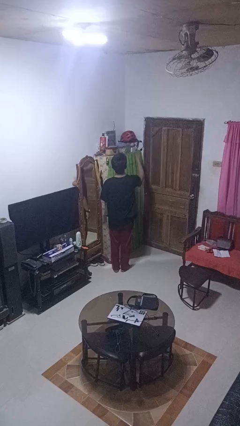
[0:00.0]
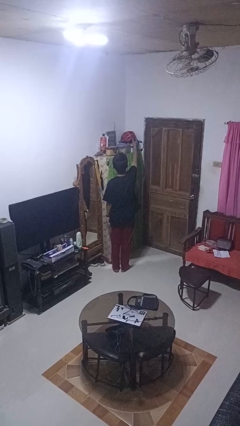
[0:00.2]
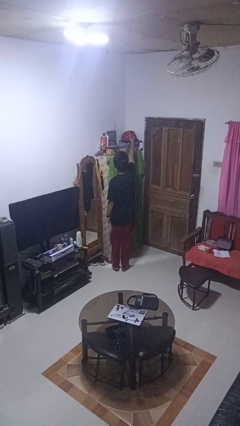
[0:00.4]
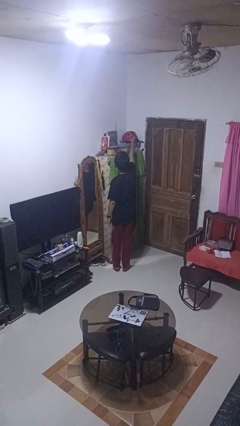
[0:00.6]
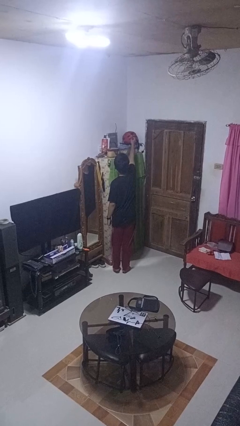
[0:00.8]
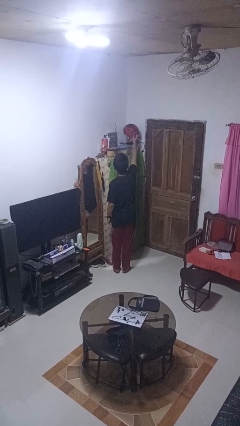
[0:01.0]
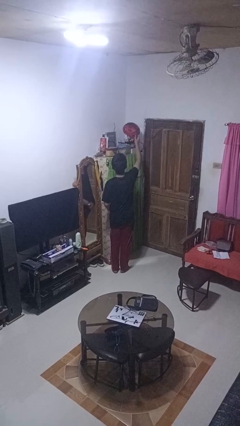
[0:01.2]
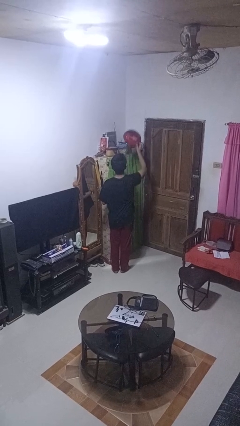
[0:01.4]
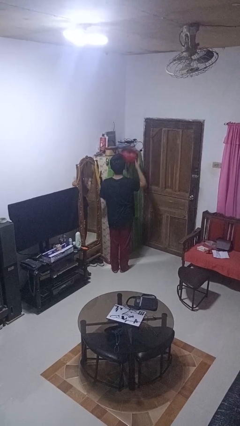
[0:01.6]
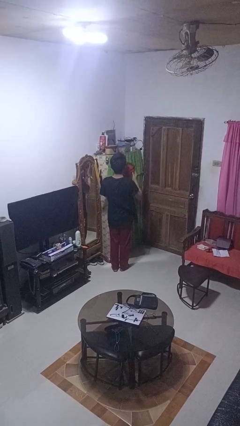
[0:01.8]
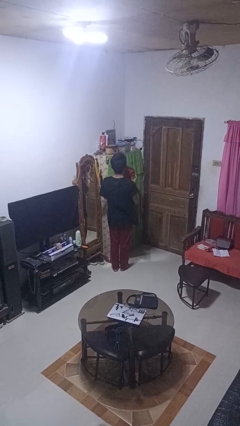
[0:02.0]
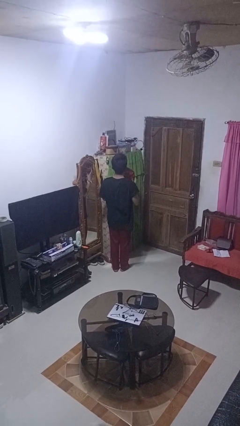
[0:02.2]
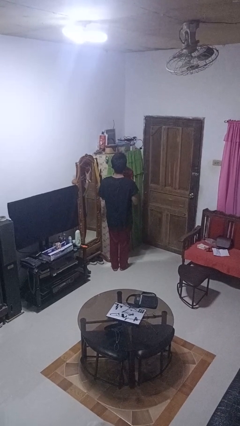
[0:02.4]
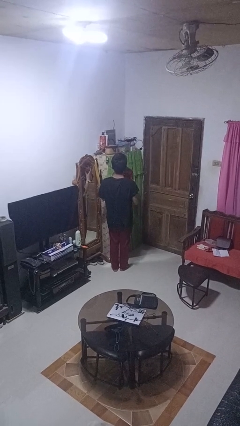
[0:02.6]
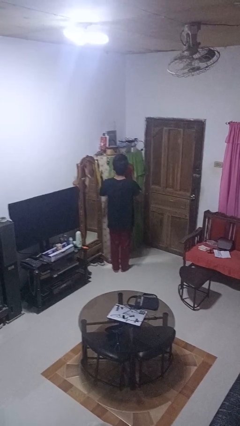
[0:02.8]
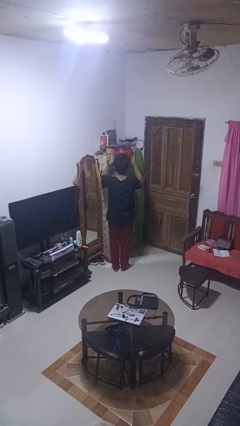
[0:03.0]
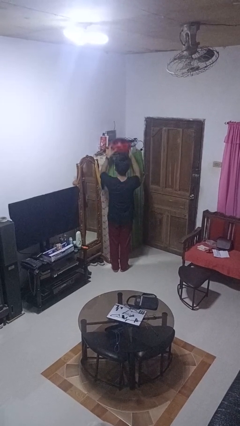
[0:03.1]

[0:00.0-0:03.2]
person picks up object from shelf

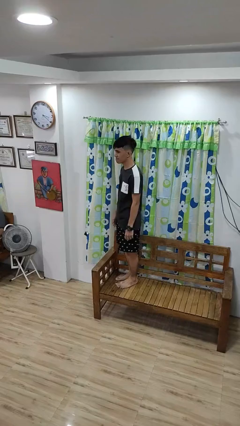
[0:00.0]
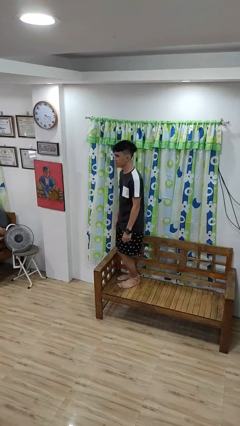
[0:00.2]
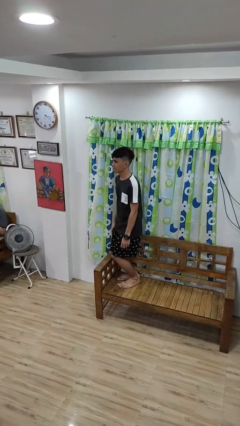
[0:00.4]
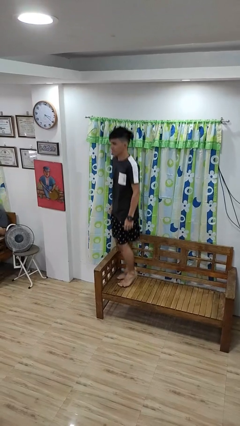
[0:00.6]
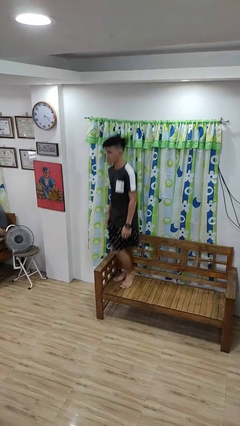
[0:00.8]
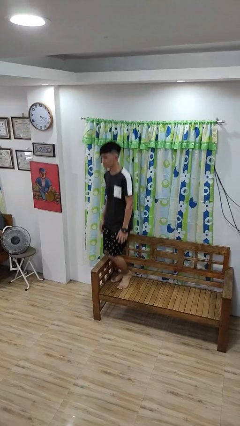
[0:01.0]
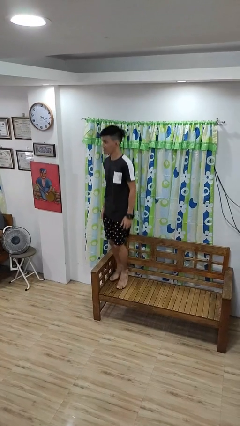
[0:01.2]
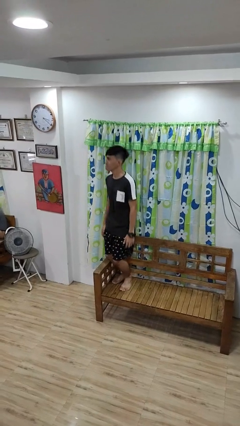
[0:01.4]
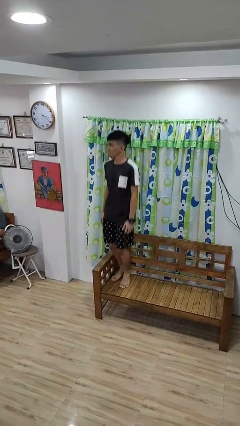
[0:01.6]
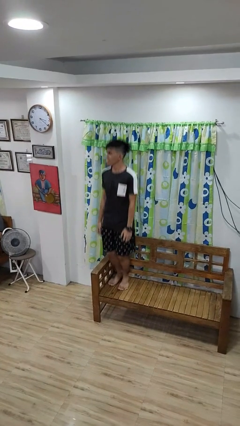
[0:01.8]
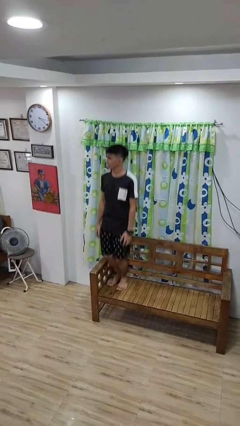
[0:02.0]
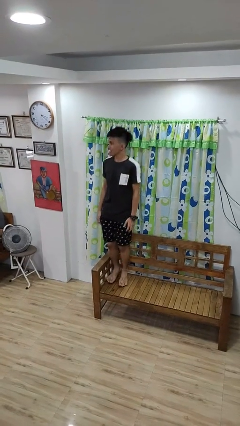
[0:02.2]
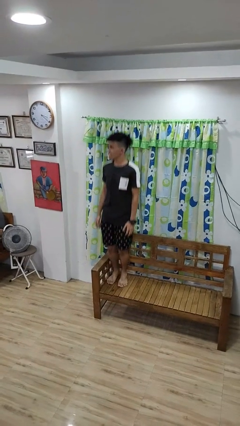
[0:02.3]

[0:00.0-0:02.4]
person jumps on couch

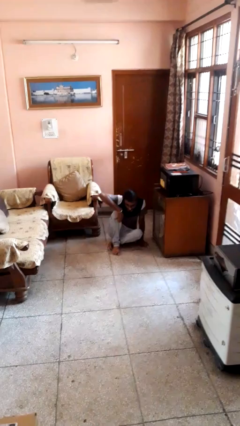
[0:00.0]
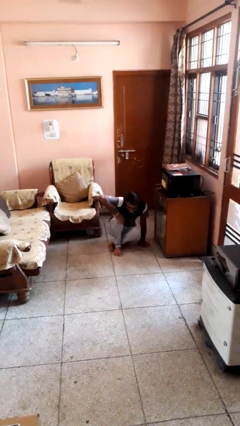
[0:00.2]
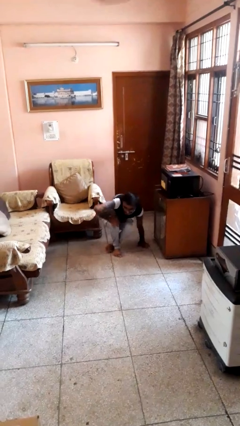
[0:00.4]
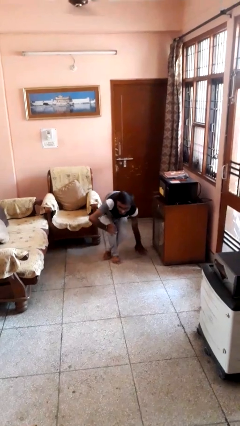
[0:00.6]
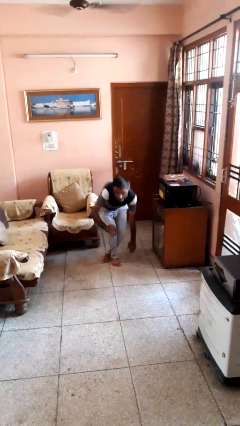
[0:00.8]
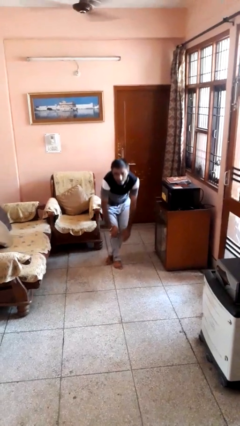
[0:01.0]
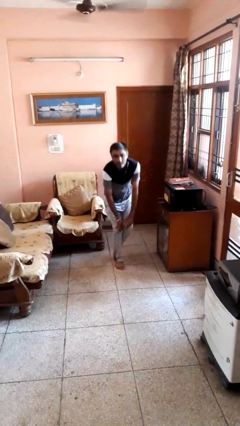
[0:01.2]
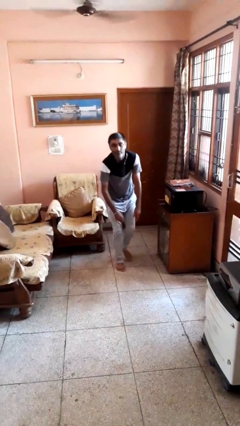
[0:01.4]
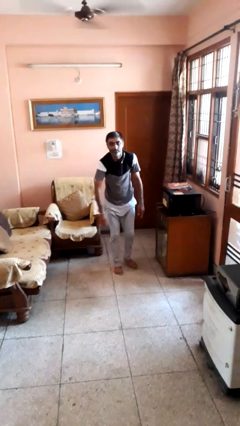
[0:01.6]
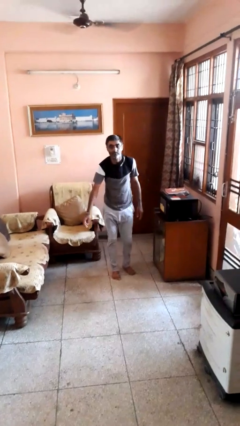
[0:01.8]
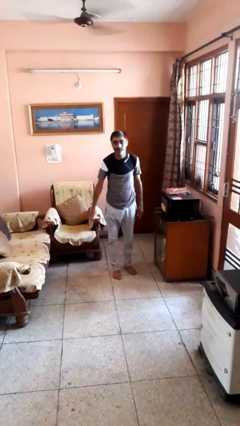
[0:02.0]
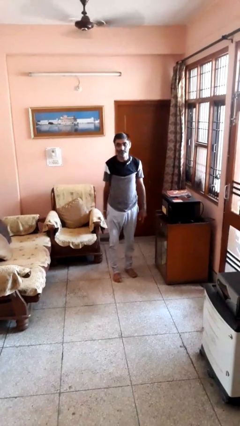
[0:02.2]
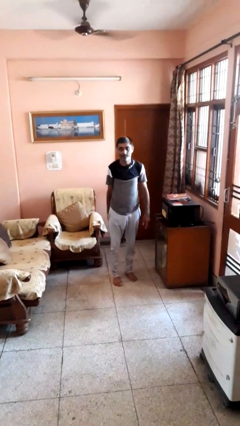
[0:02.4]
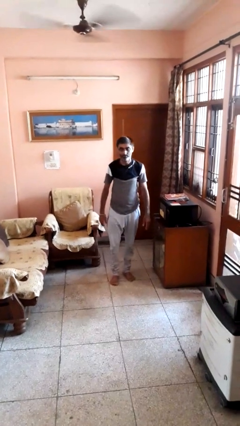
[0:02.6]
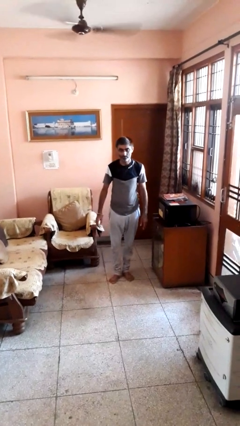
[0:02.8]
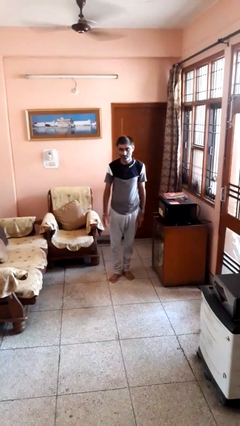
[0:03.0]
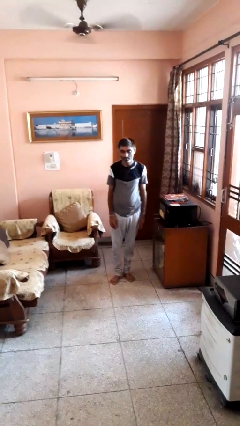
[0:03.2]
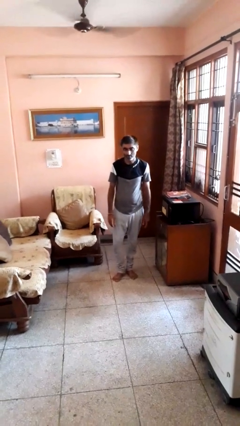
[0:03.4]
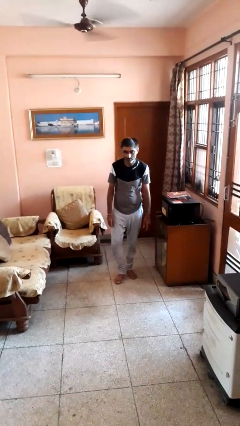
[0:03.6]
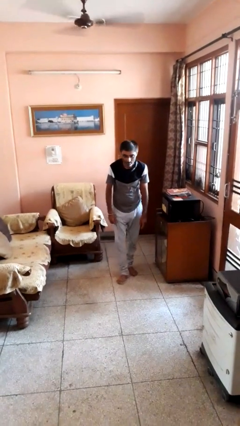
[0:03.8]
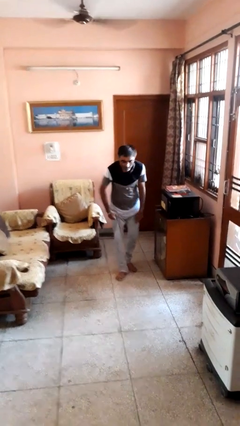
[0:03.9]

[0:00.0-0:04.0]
person stands up from floor

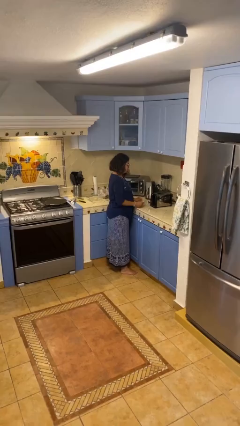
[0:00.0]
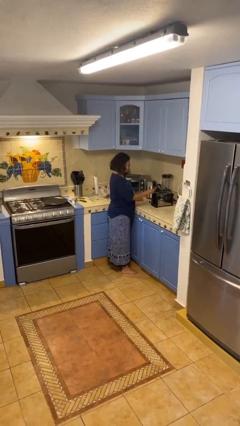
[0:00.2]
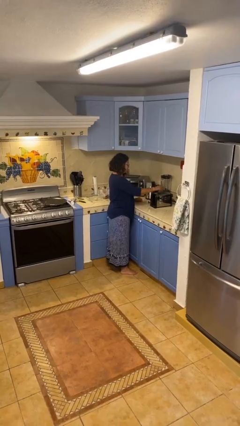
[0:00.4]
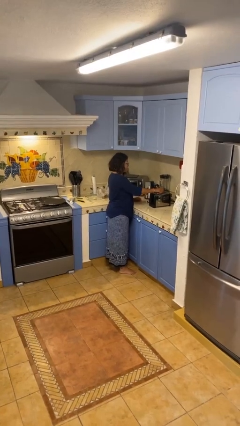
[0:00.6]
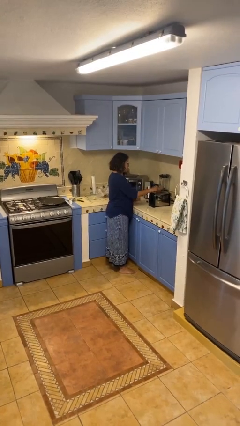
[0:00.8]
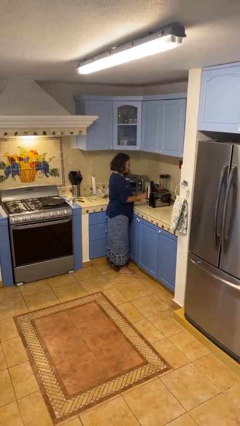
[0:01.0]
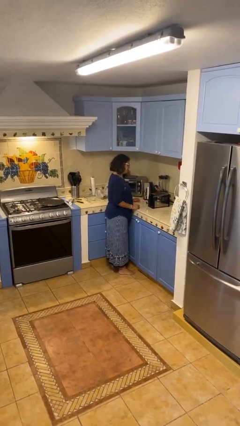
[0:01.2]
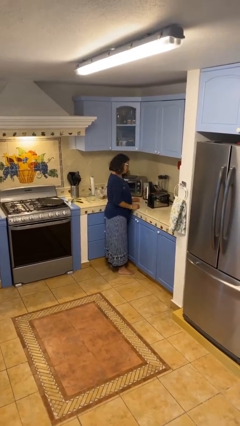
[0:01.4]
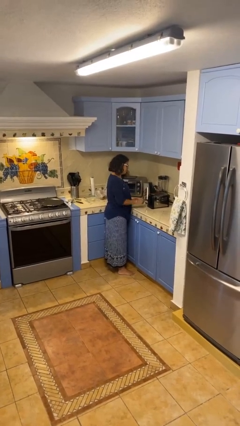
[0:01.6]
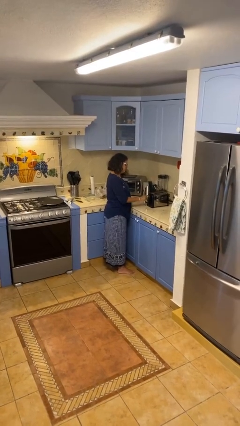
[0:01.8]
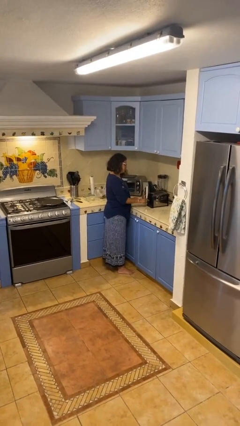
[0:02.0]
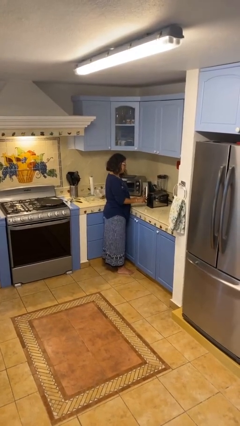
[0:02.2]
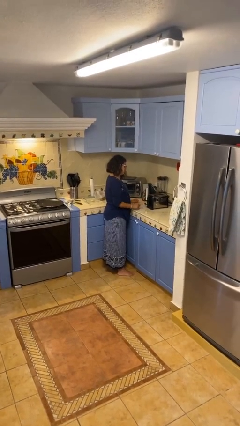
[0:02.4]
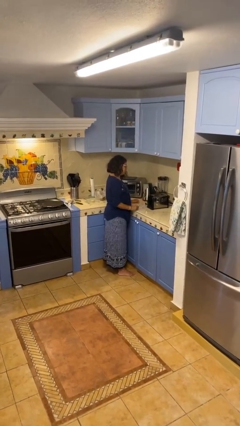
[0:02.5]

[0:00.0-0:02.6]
person puts object into toaster

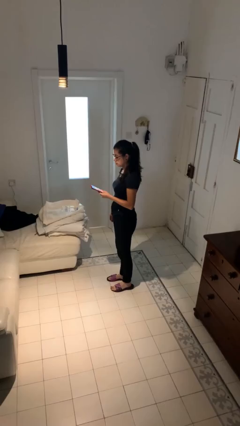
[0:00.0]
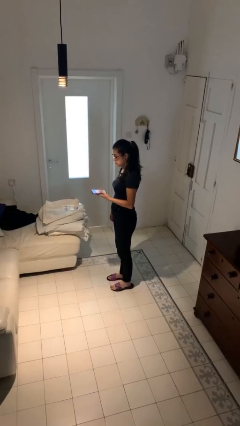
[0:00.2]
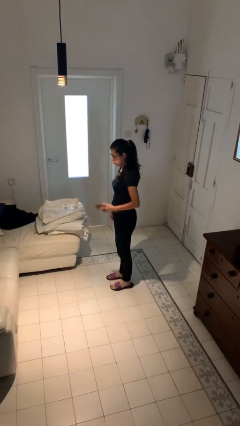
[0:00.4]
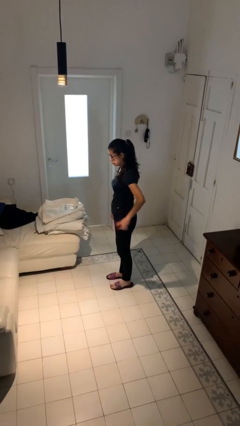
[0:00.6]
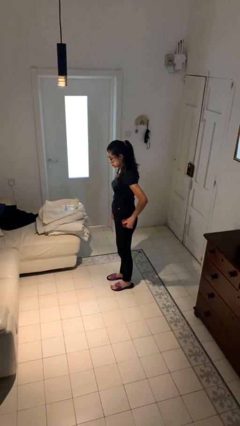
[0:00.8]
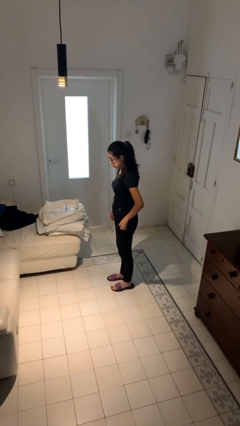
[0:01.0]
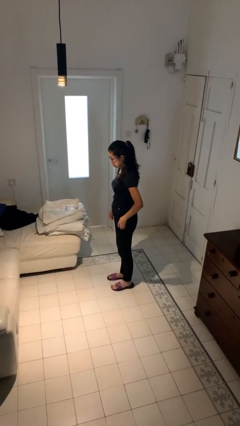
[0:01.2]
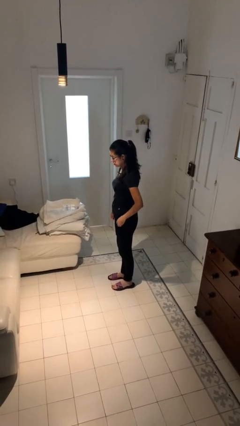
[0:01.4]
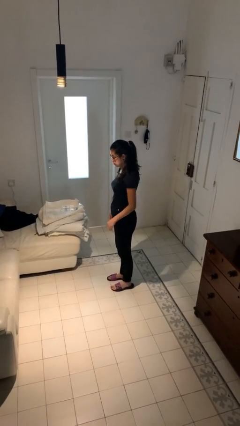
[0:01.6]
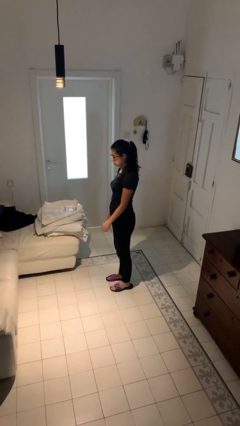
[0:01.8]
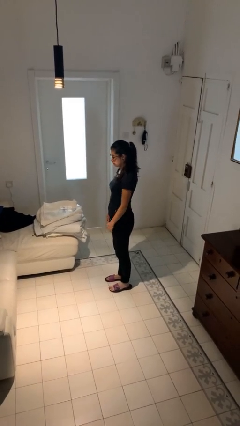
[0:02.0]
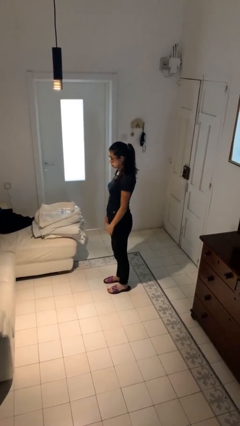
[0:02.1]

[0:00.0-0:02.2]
person puts phone into pocket

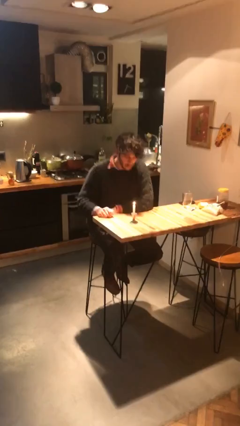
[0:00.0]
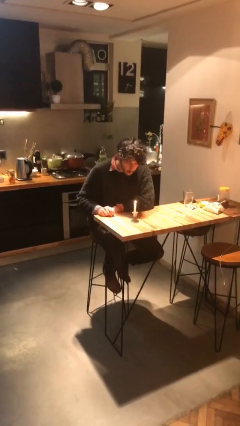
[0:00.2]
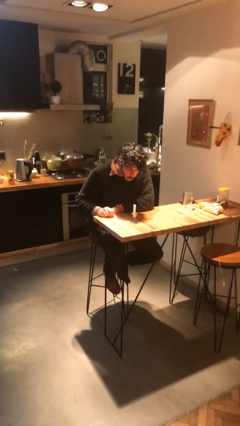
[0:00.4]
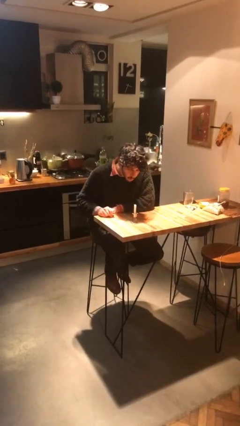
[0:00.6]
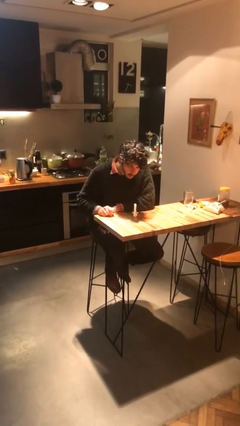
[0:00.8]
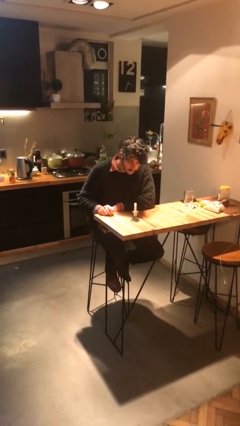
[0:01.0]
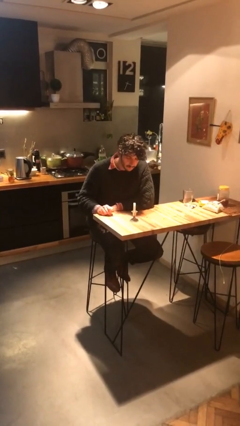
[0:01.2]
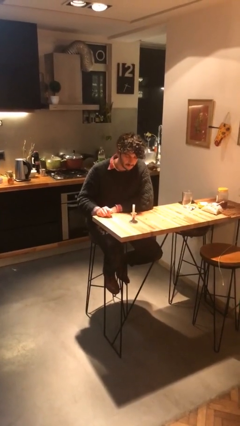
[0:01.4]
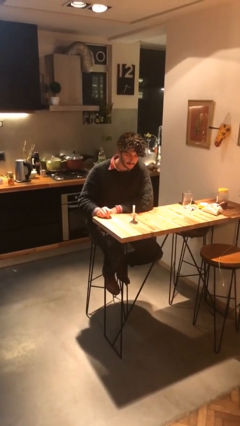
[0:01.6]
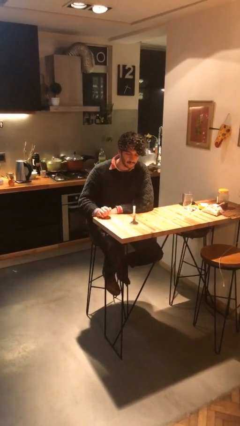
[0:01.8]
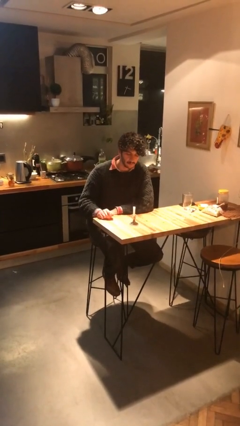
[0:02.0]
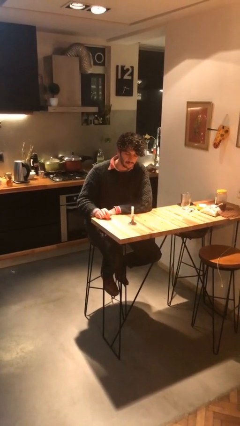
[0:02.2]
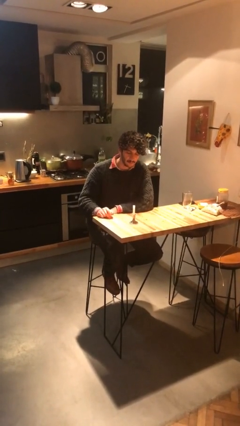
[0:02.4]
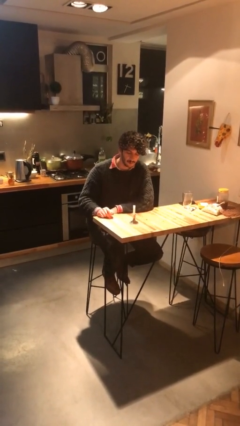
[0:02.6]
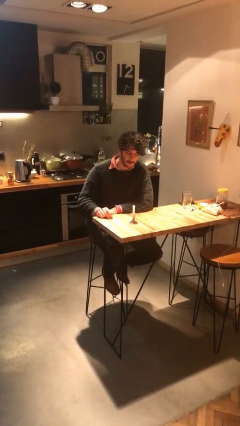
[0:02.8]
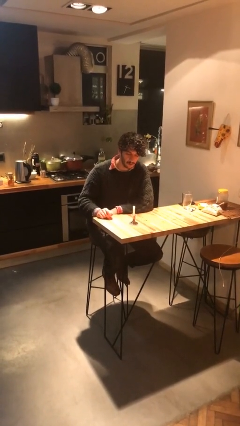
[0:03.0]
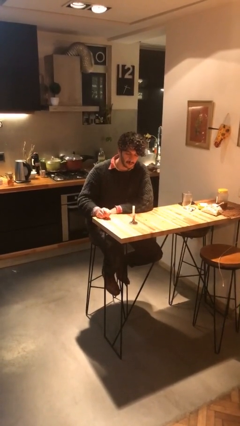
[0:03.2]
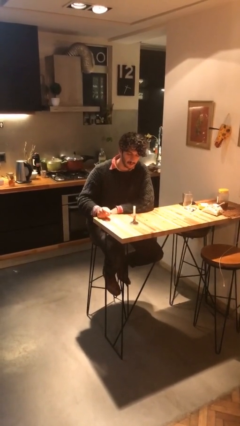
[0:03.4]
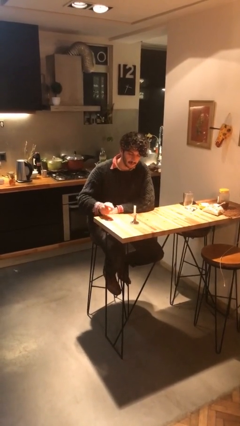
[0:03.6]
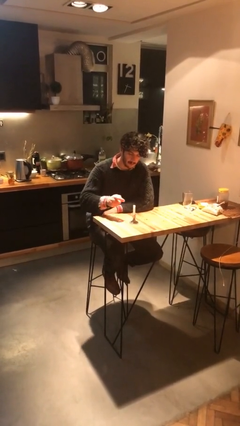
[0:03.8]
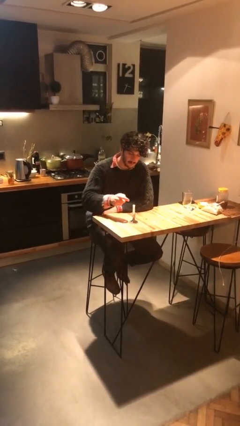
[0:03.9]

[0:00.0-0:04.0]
person extinguishes candle
